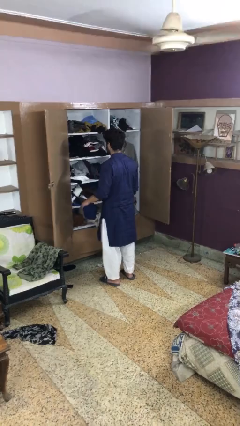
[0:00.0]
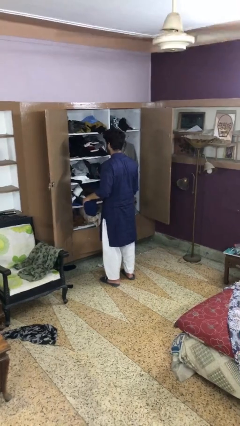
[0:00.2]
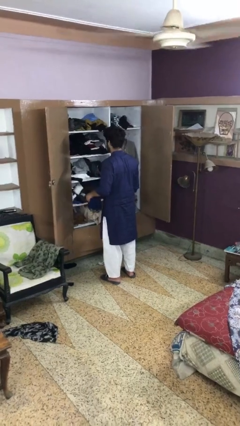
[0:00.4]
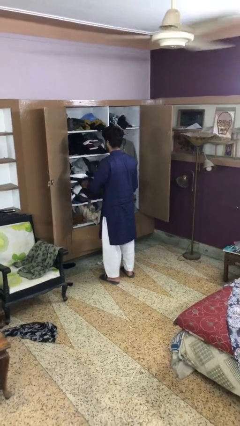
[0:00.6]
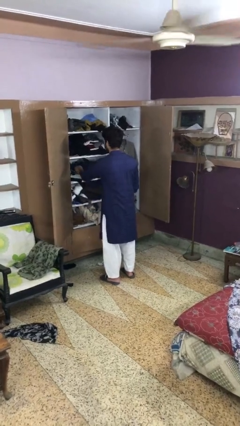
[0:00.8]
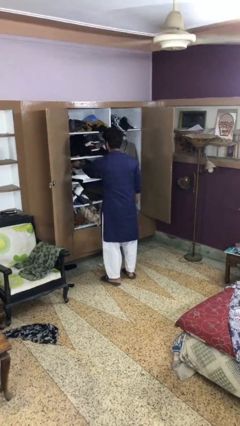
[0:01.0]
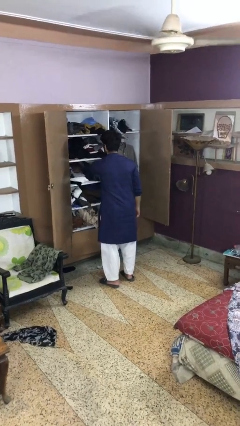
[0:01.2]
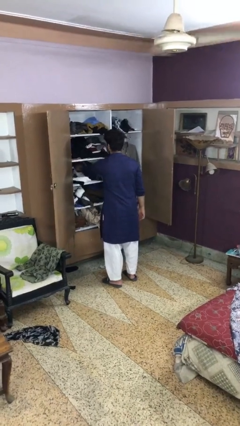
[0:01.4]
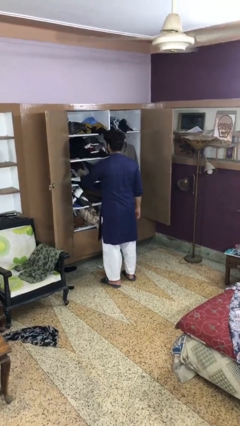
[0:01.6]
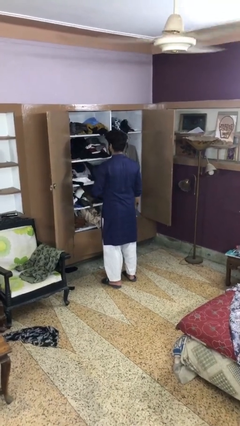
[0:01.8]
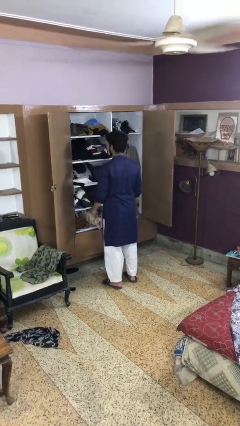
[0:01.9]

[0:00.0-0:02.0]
person puts clothes into dresser

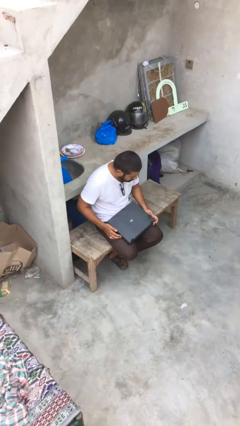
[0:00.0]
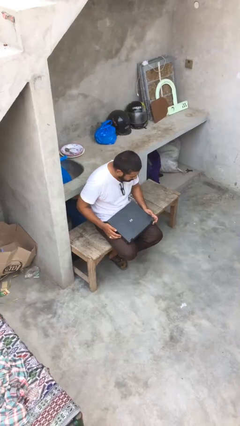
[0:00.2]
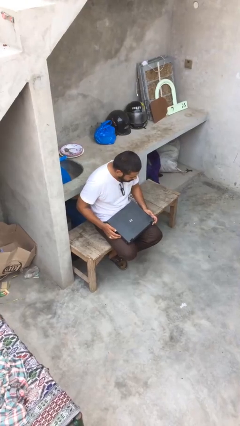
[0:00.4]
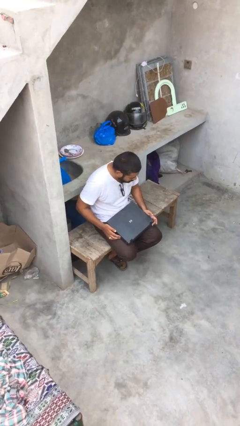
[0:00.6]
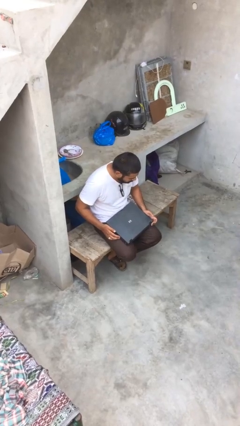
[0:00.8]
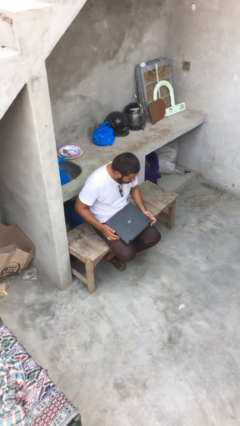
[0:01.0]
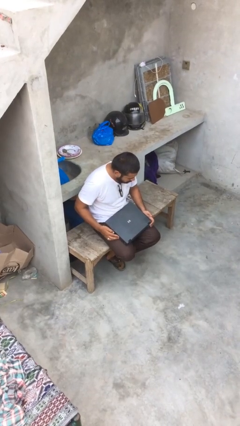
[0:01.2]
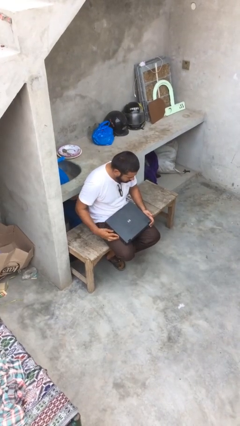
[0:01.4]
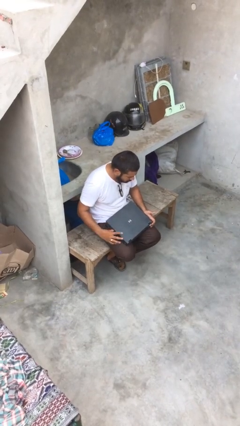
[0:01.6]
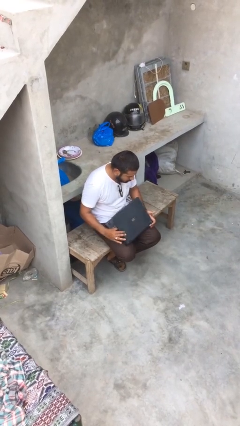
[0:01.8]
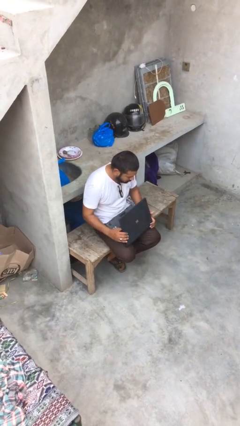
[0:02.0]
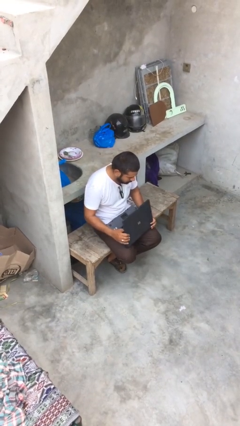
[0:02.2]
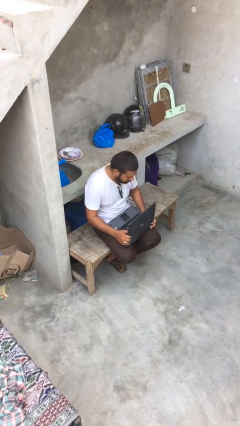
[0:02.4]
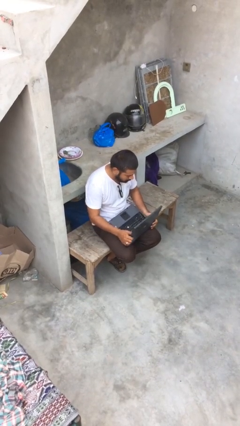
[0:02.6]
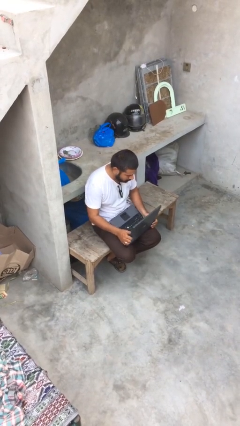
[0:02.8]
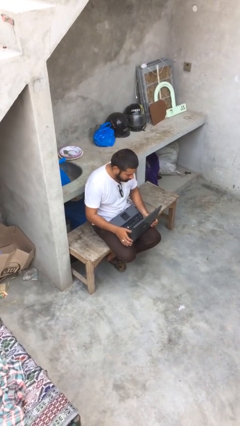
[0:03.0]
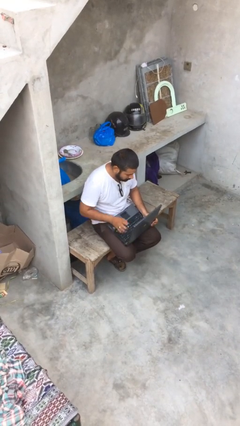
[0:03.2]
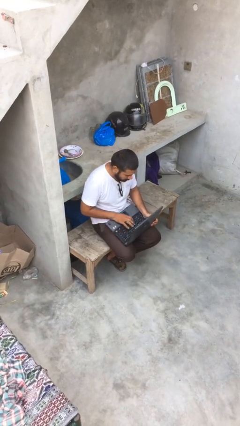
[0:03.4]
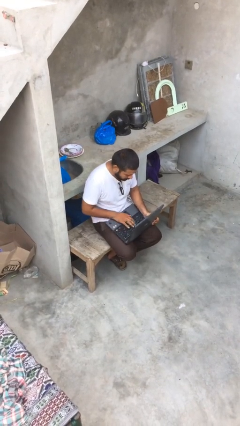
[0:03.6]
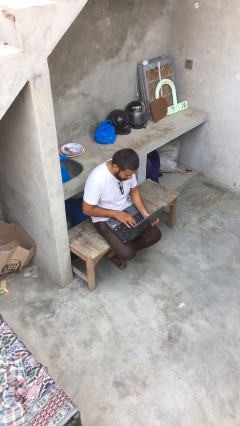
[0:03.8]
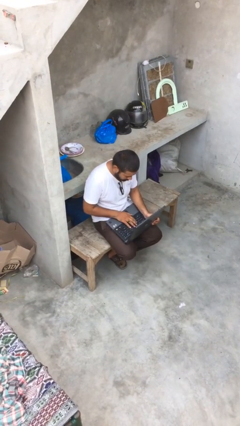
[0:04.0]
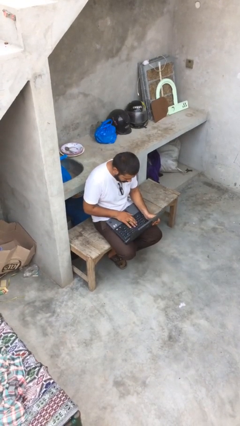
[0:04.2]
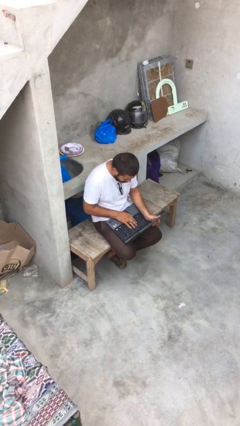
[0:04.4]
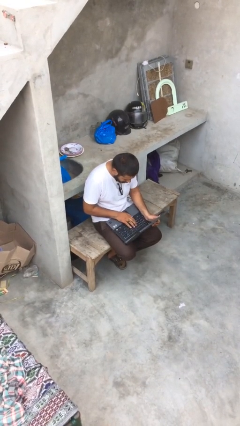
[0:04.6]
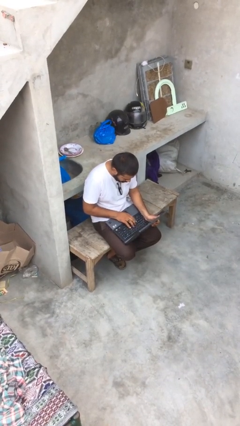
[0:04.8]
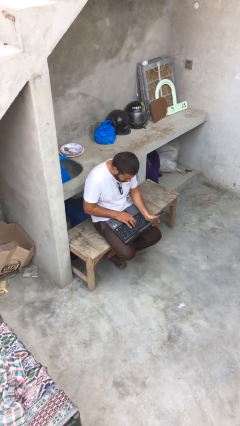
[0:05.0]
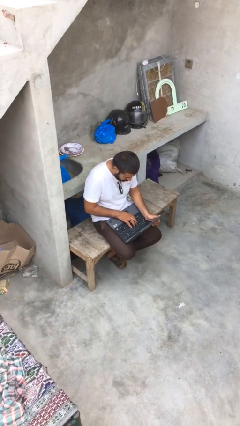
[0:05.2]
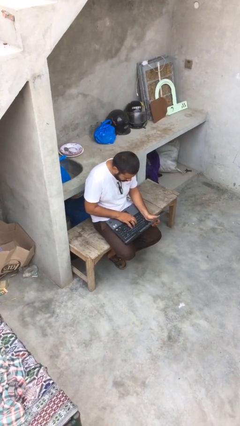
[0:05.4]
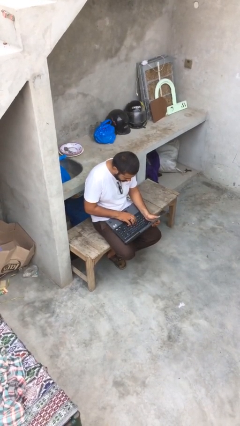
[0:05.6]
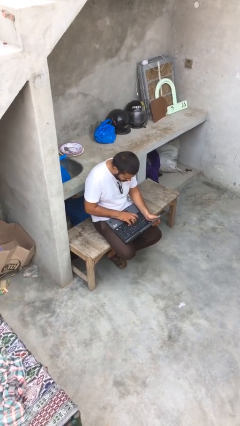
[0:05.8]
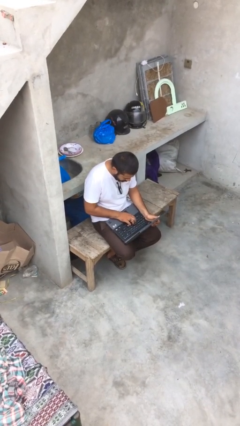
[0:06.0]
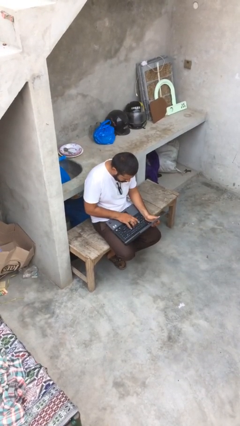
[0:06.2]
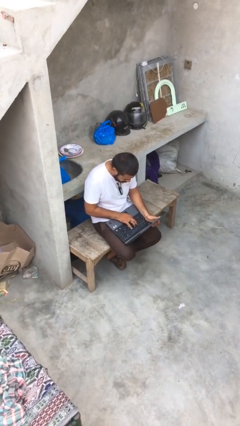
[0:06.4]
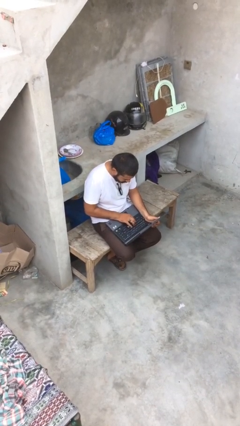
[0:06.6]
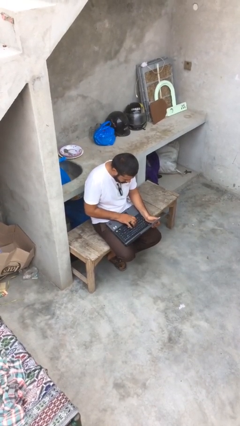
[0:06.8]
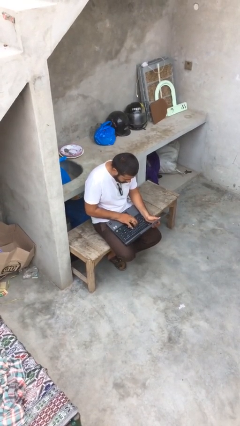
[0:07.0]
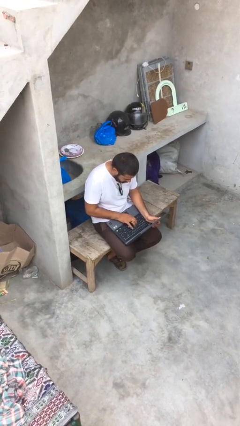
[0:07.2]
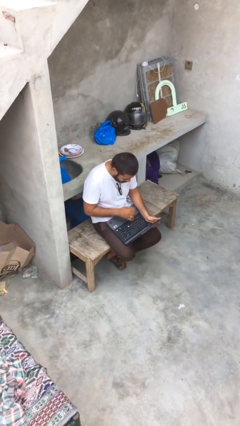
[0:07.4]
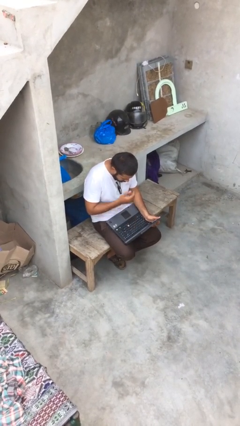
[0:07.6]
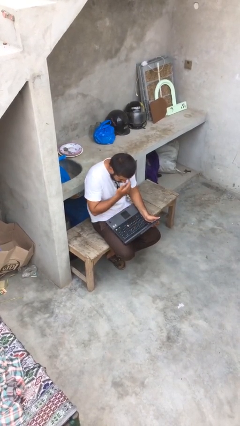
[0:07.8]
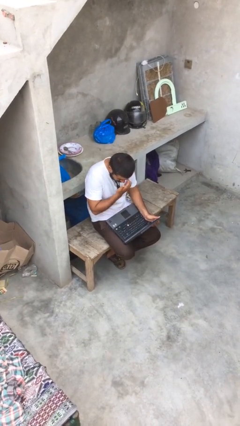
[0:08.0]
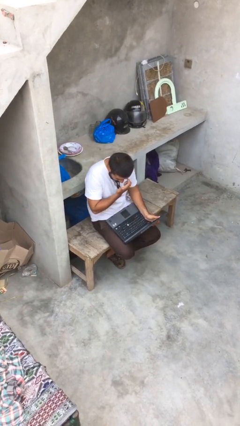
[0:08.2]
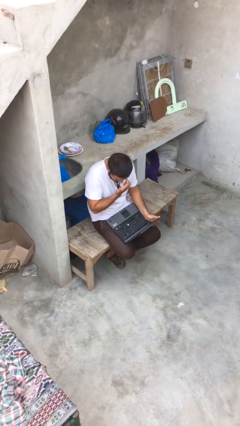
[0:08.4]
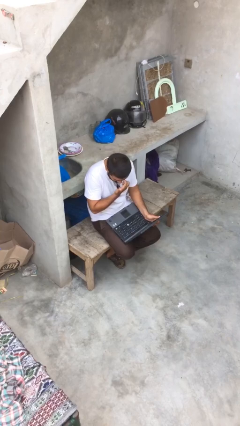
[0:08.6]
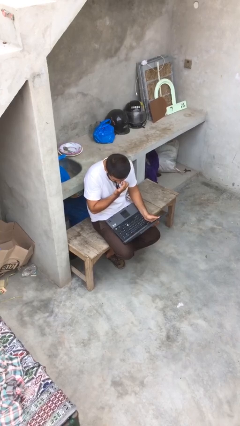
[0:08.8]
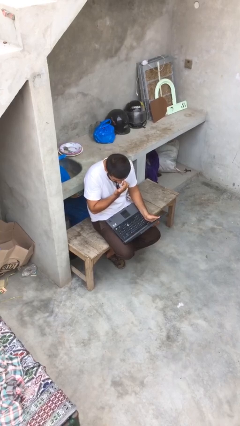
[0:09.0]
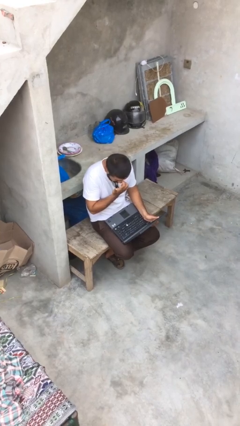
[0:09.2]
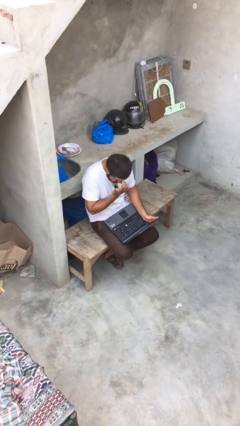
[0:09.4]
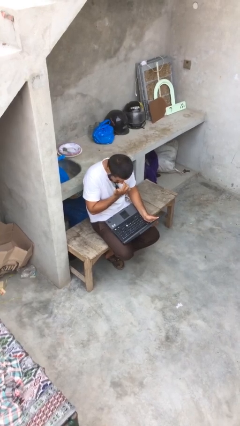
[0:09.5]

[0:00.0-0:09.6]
person interacts with laptop

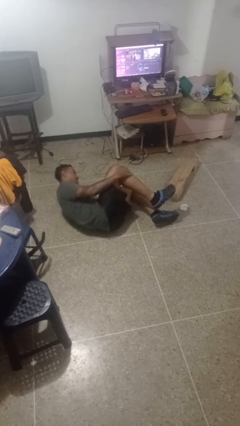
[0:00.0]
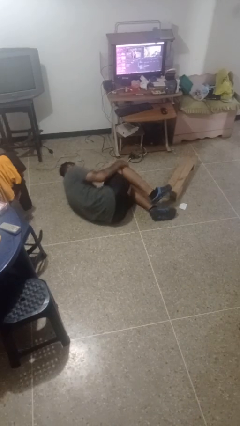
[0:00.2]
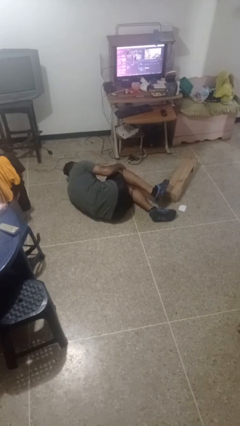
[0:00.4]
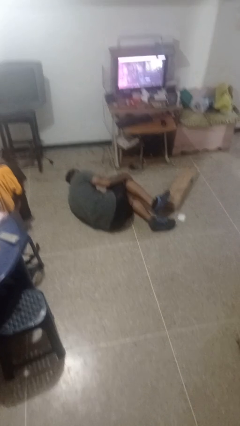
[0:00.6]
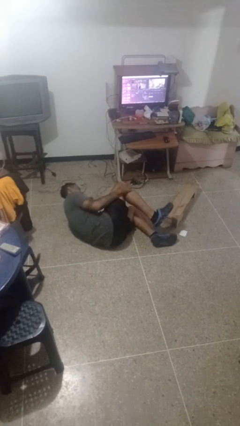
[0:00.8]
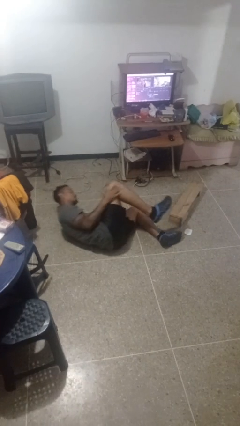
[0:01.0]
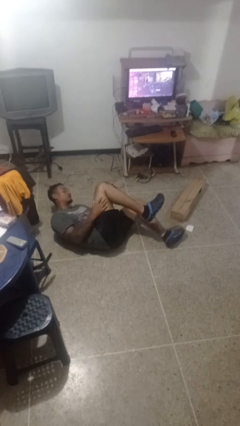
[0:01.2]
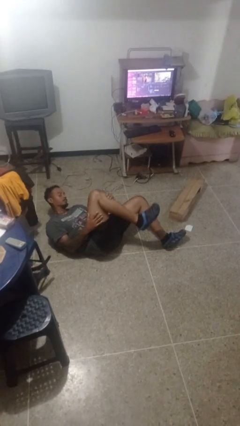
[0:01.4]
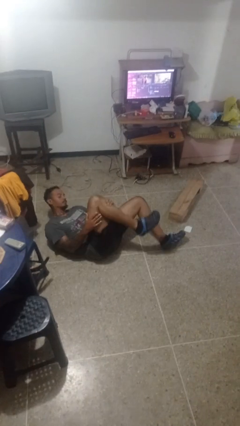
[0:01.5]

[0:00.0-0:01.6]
person lies down on floor

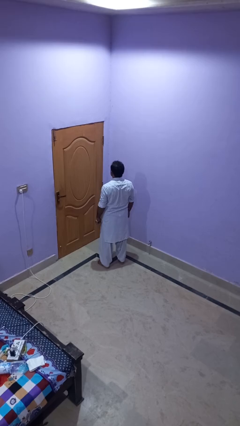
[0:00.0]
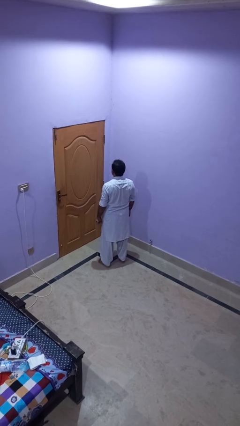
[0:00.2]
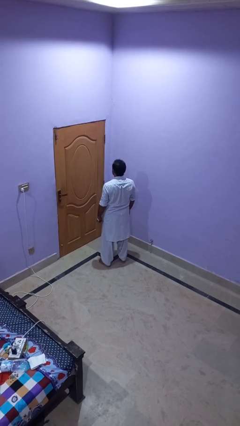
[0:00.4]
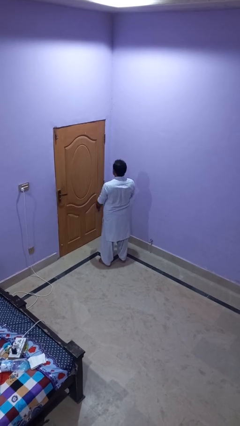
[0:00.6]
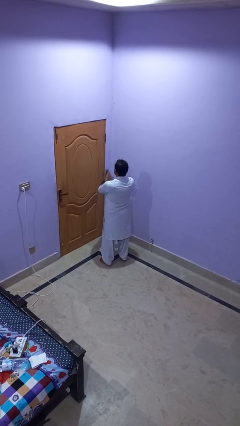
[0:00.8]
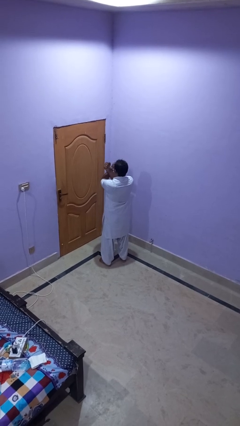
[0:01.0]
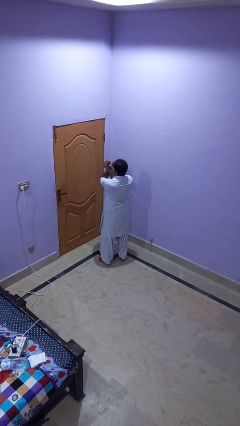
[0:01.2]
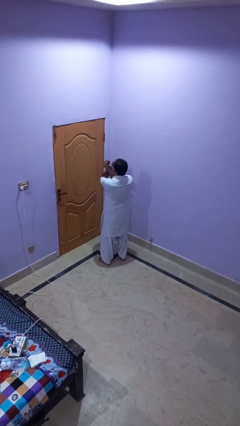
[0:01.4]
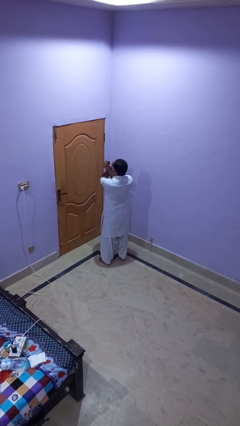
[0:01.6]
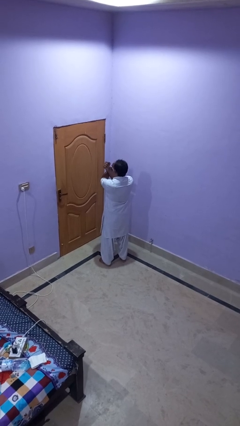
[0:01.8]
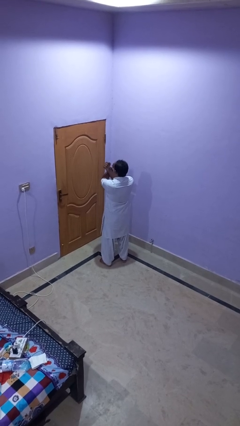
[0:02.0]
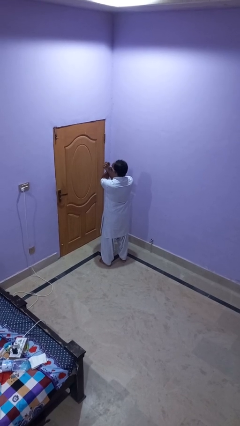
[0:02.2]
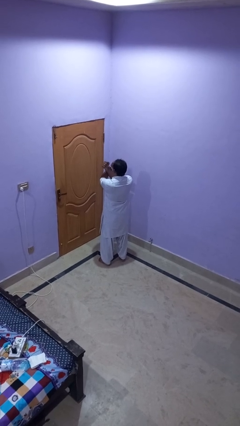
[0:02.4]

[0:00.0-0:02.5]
person crosses arms

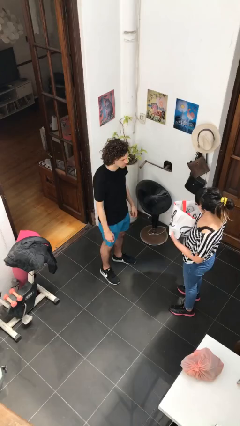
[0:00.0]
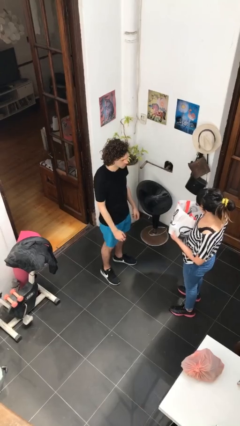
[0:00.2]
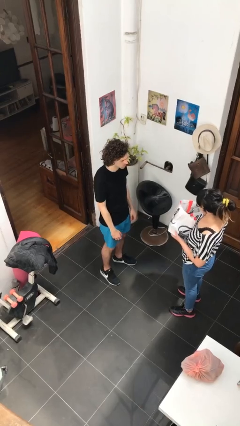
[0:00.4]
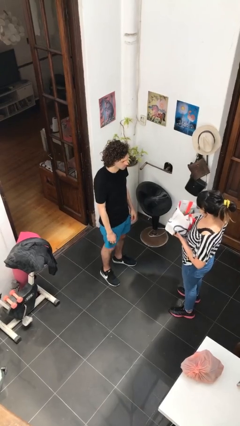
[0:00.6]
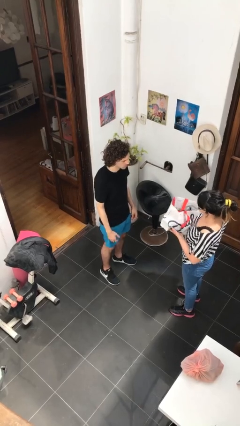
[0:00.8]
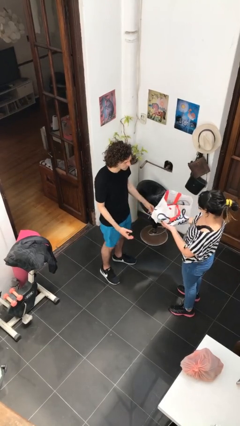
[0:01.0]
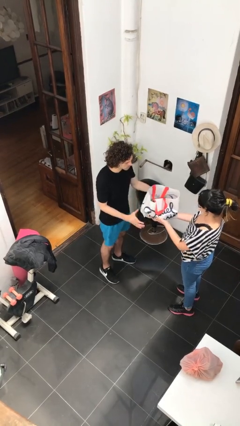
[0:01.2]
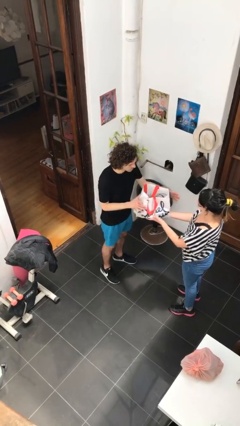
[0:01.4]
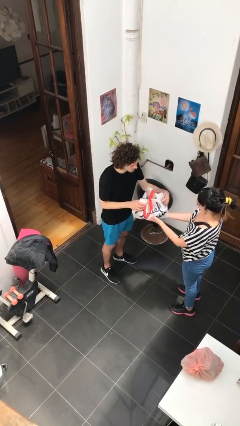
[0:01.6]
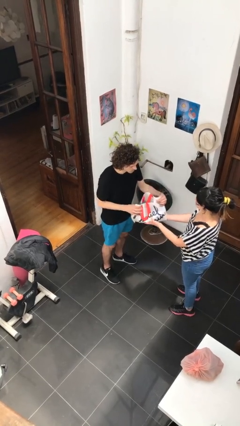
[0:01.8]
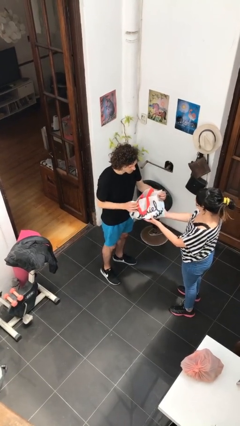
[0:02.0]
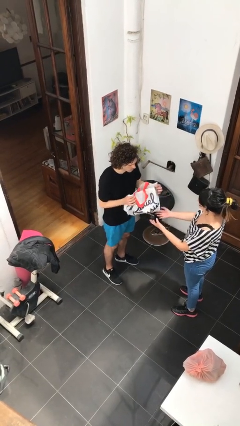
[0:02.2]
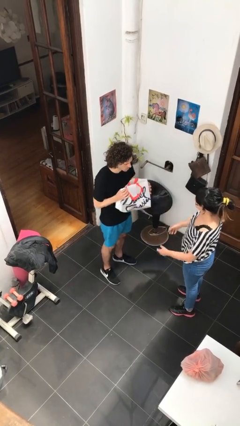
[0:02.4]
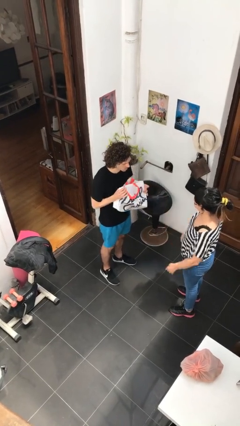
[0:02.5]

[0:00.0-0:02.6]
person transfers object to person
